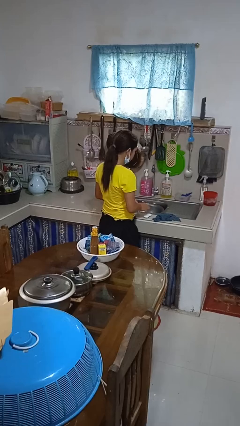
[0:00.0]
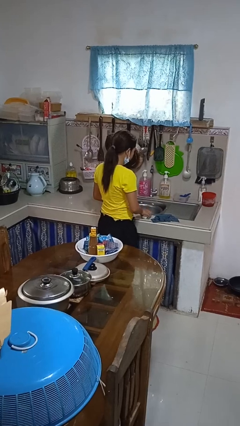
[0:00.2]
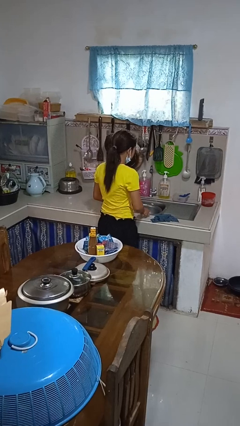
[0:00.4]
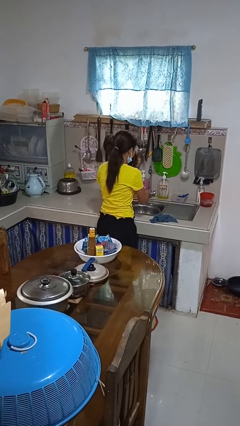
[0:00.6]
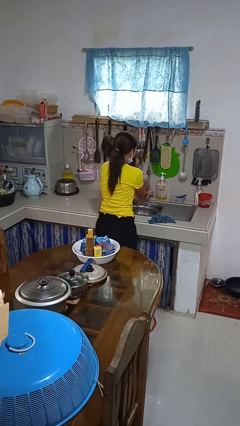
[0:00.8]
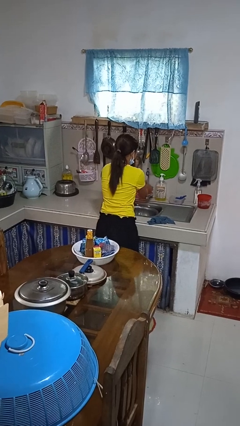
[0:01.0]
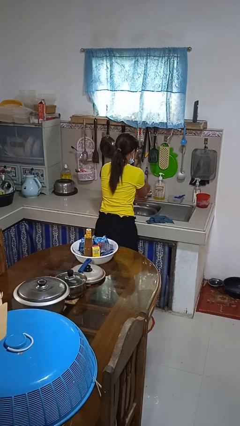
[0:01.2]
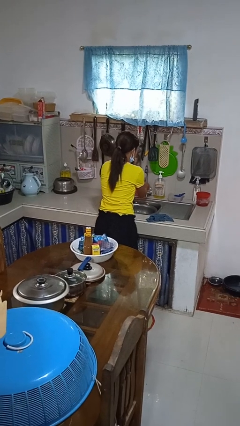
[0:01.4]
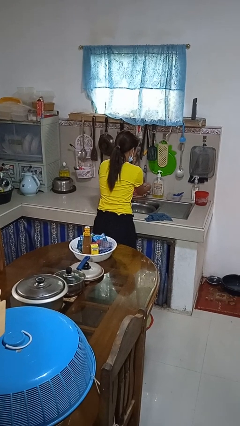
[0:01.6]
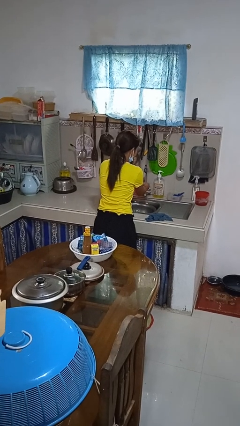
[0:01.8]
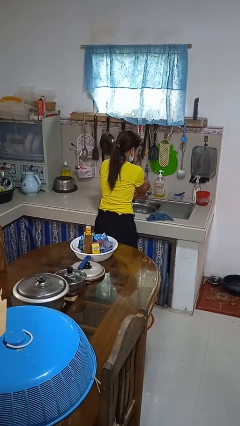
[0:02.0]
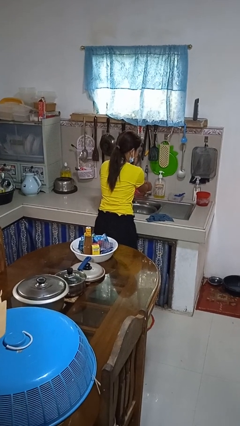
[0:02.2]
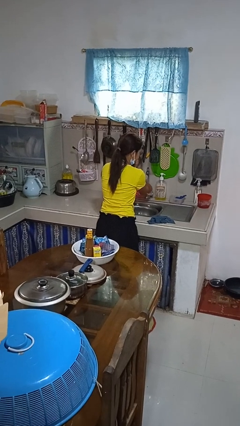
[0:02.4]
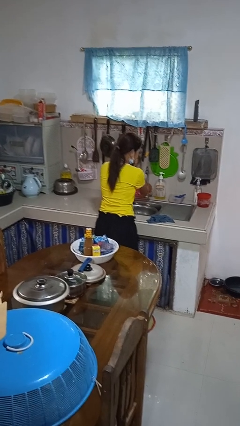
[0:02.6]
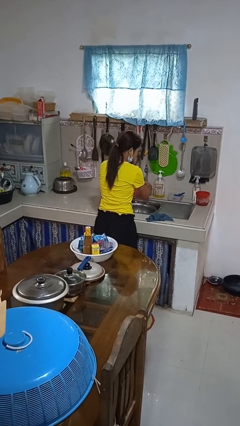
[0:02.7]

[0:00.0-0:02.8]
person washes hands

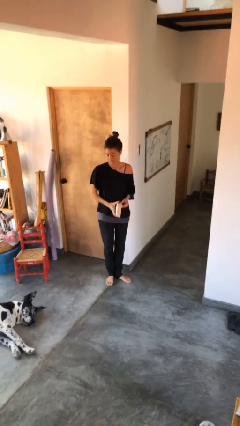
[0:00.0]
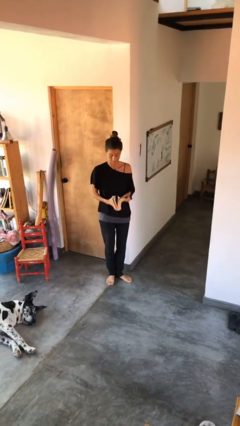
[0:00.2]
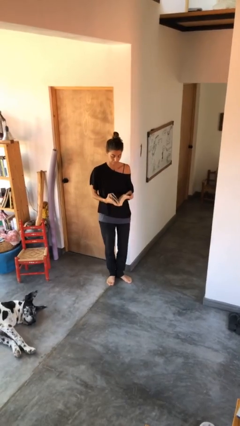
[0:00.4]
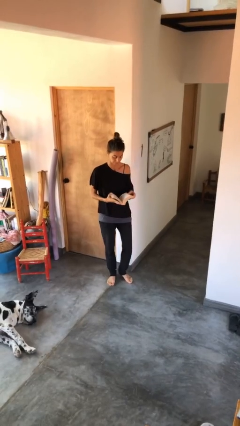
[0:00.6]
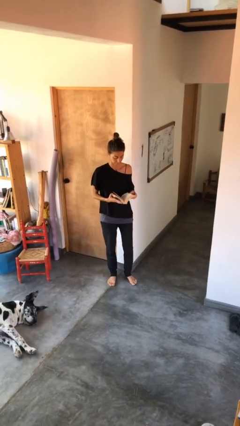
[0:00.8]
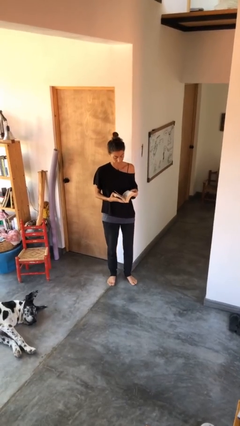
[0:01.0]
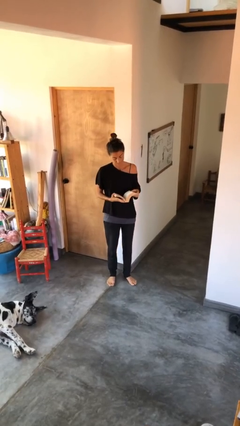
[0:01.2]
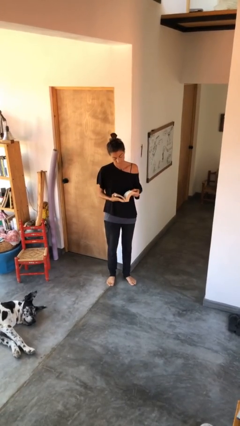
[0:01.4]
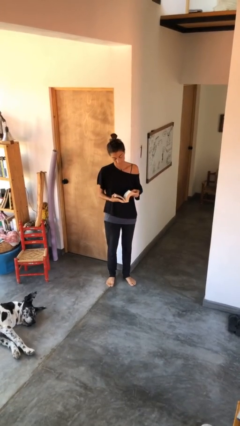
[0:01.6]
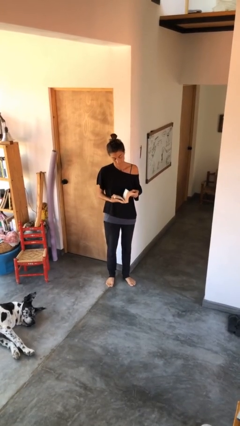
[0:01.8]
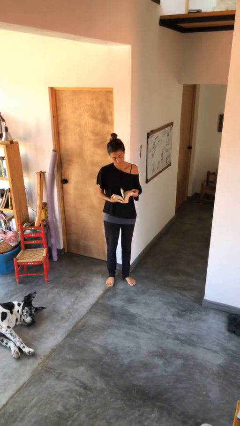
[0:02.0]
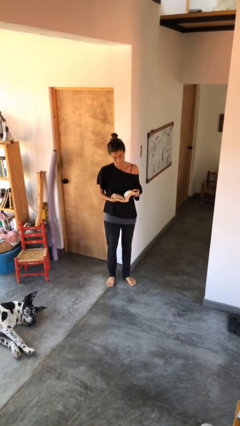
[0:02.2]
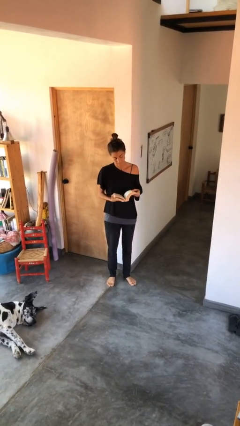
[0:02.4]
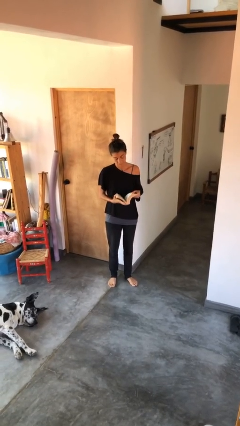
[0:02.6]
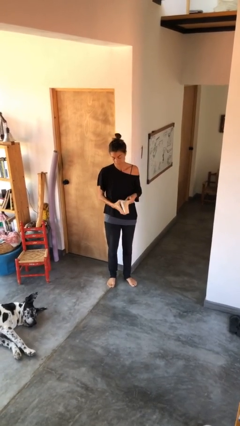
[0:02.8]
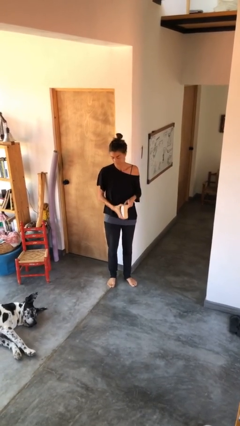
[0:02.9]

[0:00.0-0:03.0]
person reads book

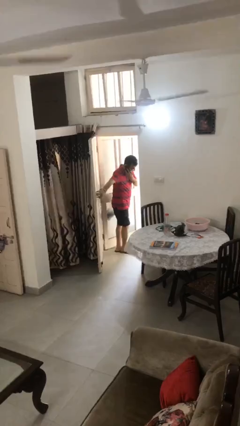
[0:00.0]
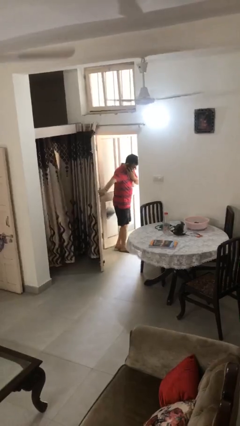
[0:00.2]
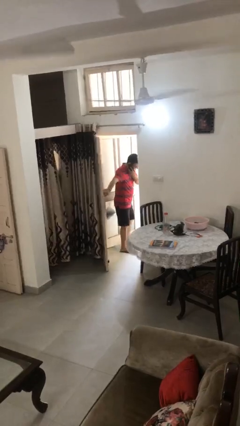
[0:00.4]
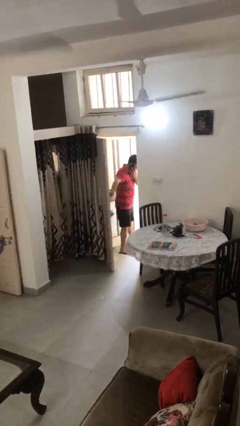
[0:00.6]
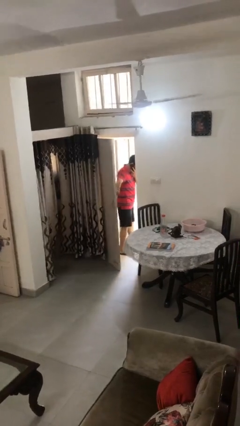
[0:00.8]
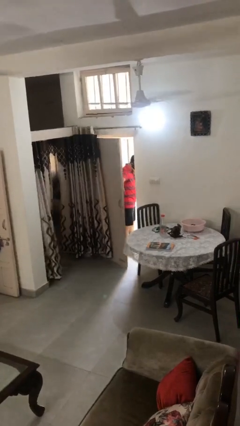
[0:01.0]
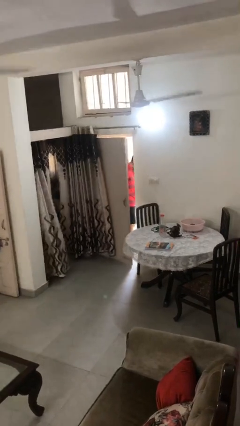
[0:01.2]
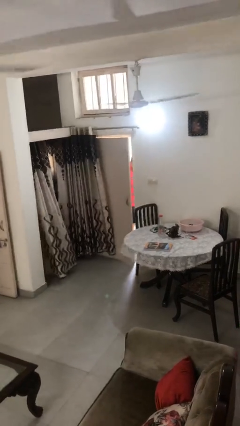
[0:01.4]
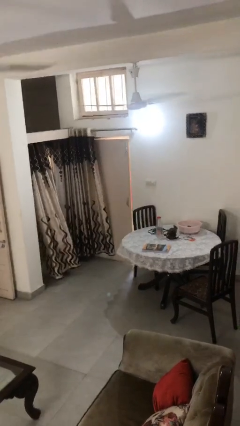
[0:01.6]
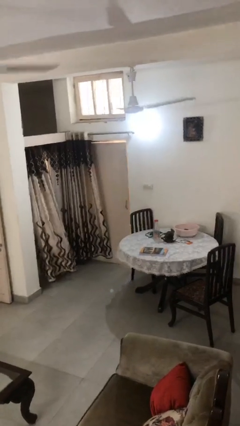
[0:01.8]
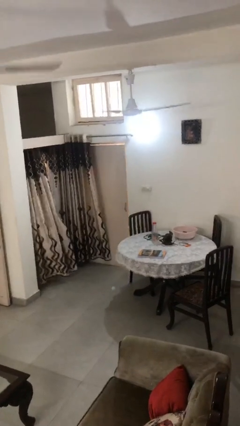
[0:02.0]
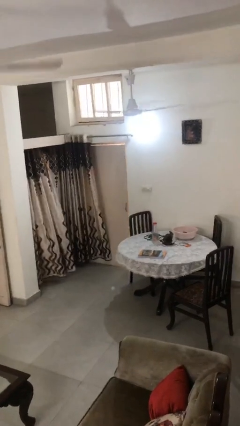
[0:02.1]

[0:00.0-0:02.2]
person closes facility door

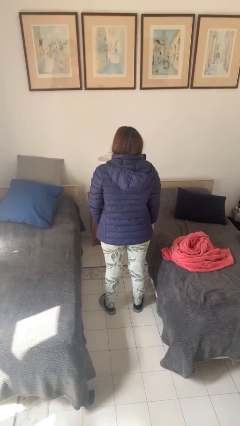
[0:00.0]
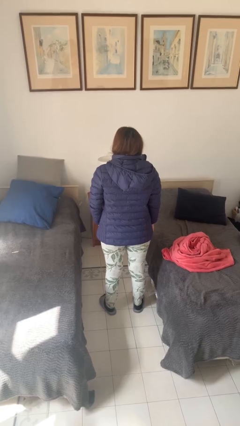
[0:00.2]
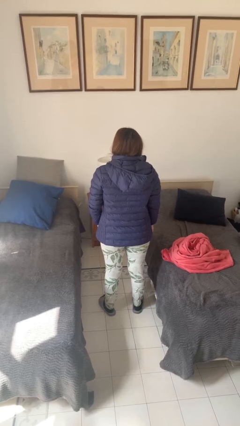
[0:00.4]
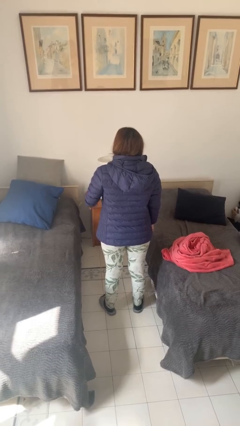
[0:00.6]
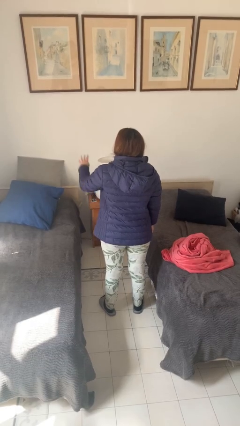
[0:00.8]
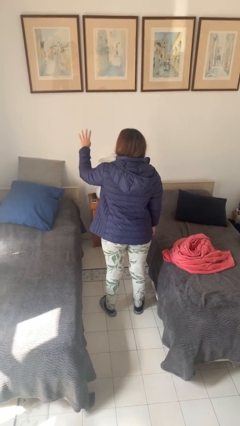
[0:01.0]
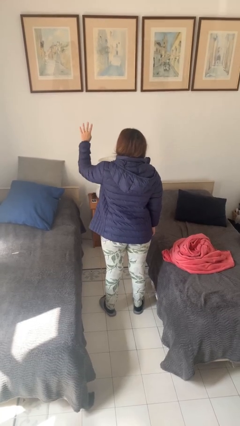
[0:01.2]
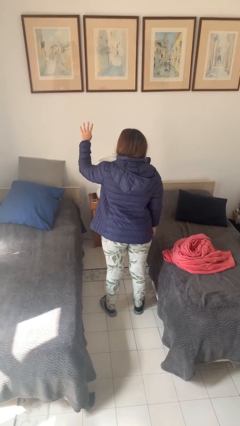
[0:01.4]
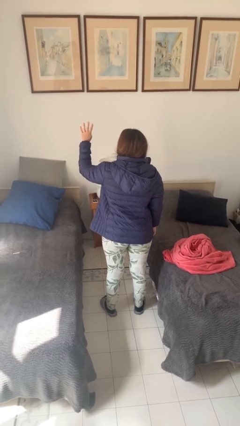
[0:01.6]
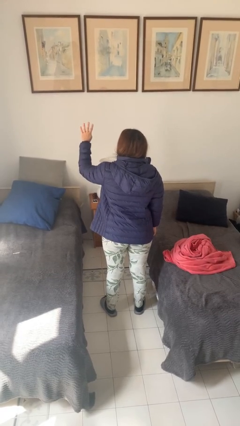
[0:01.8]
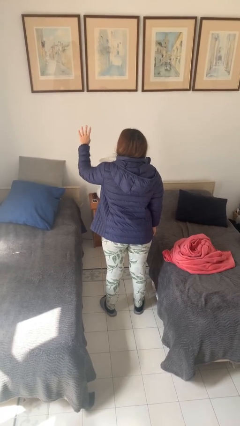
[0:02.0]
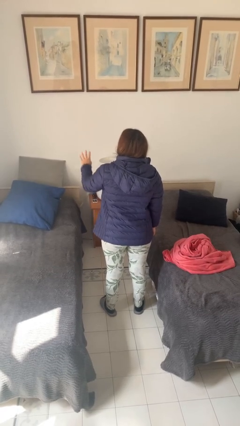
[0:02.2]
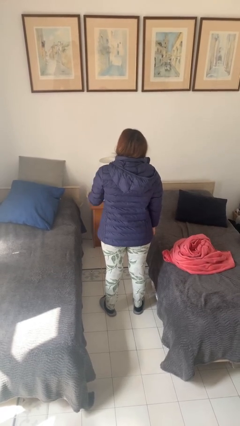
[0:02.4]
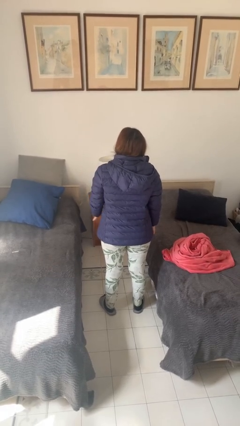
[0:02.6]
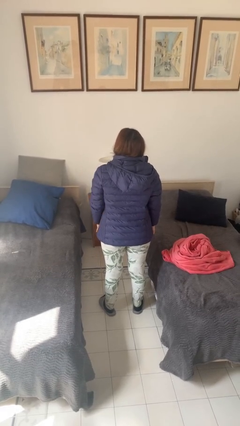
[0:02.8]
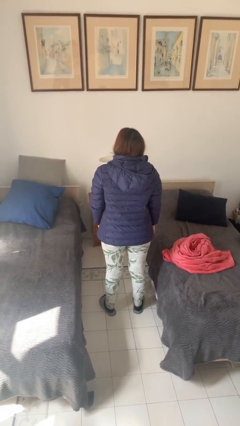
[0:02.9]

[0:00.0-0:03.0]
person gestures number four

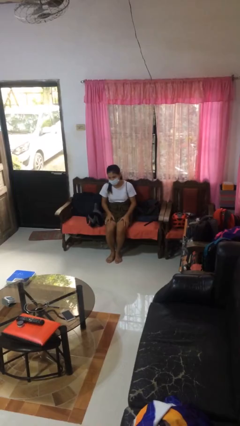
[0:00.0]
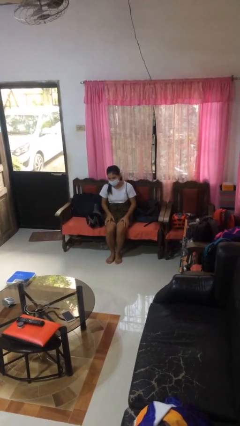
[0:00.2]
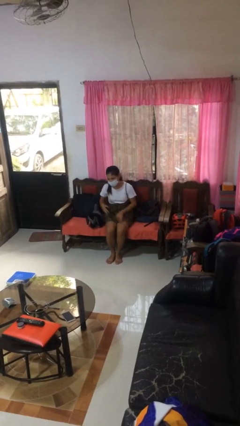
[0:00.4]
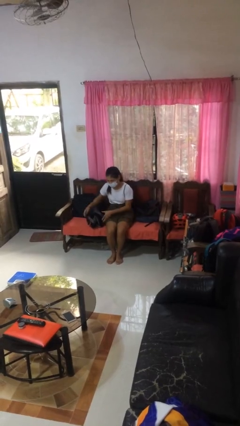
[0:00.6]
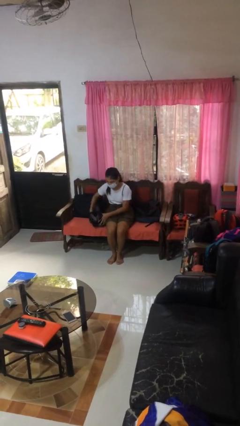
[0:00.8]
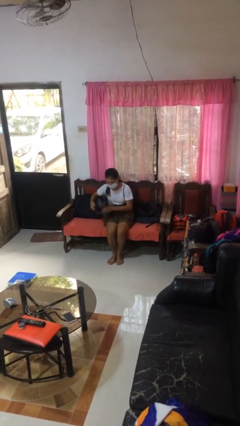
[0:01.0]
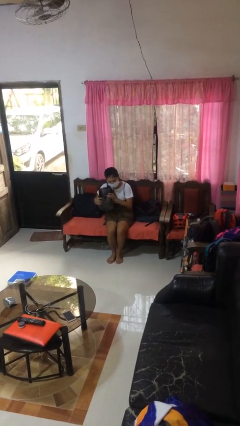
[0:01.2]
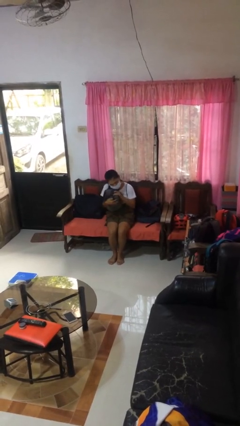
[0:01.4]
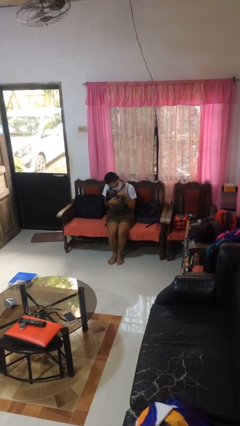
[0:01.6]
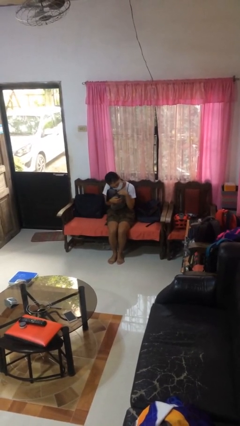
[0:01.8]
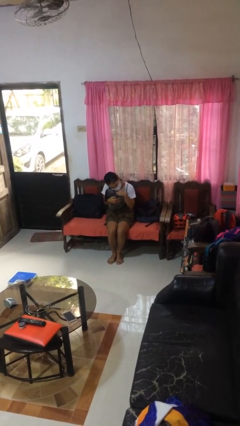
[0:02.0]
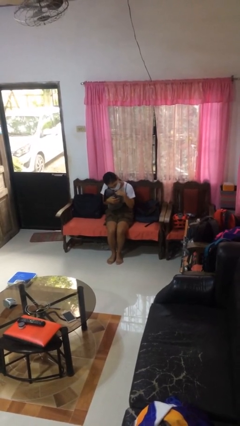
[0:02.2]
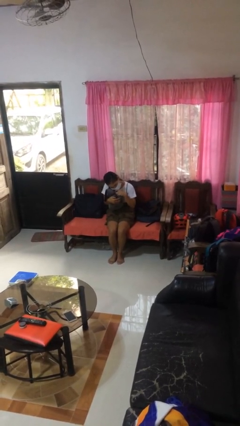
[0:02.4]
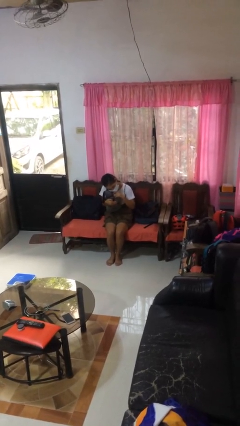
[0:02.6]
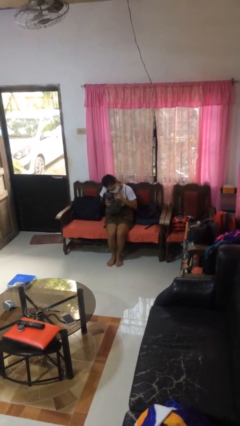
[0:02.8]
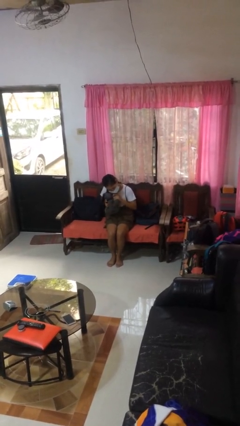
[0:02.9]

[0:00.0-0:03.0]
person hugs stuffed animal

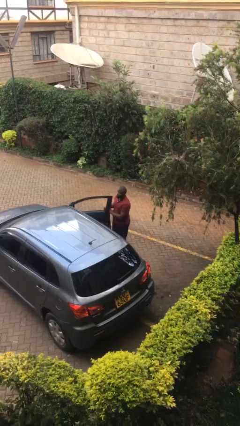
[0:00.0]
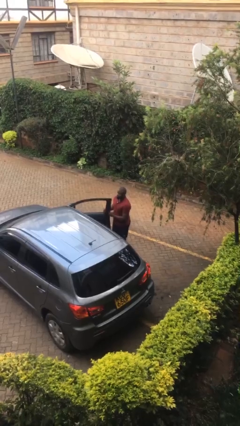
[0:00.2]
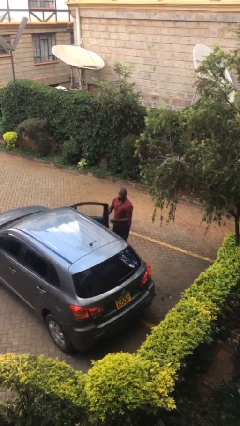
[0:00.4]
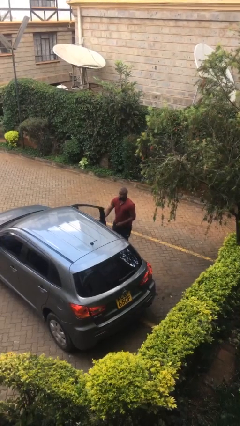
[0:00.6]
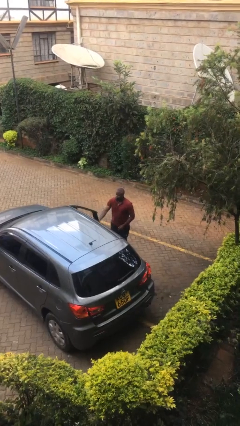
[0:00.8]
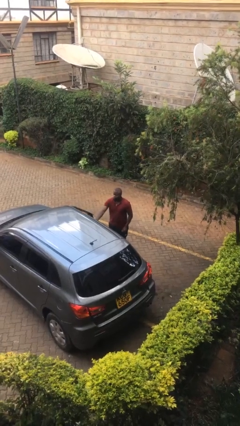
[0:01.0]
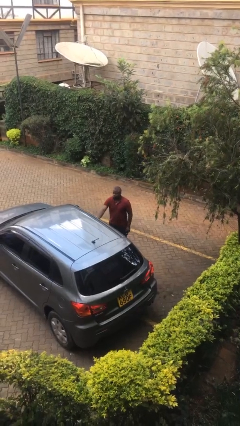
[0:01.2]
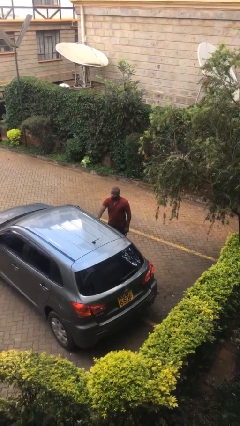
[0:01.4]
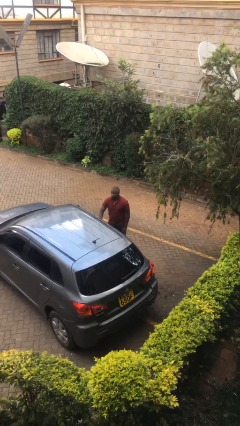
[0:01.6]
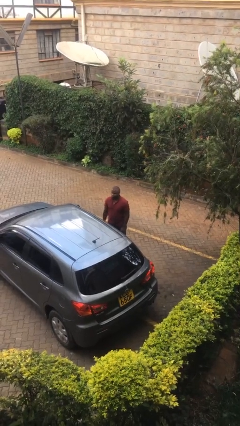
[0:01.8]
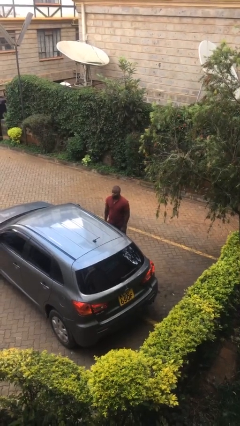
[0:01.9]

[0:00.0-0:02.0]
person closes car door

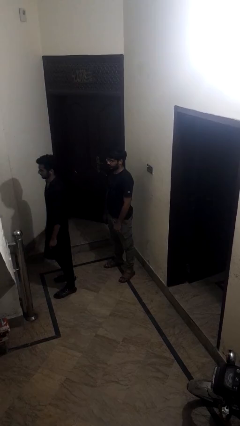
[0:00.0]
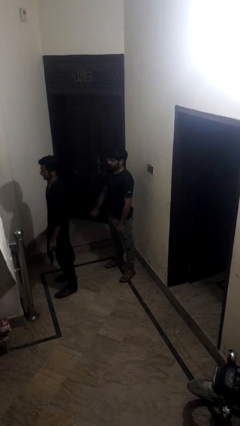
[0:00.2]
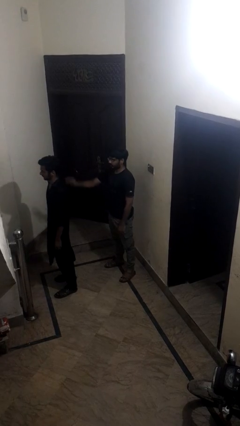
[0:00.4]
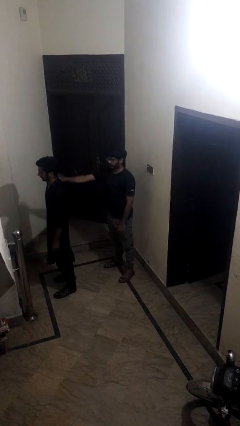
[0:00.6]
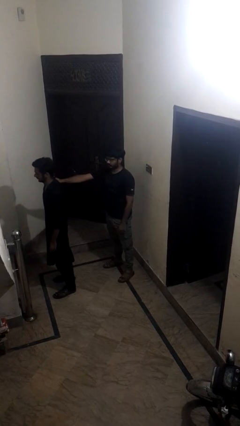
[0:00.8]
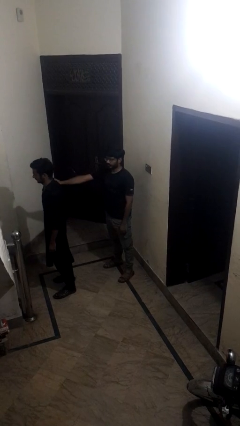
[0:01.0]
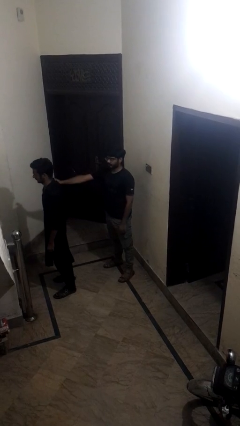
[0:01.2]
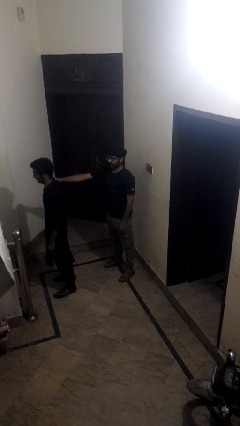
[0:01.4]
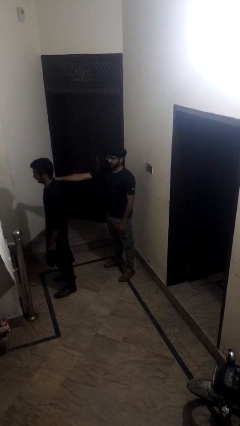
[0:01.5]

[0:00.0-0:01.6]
person grabs person by shoulder
